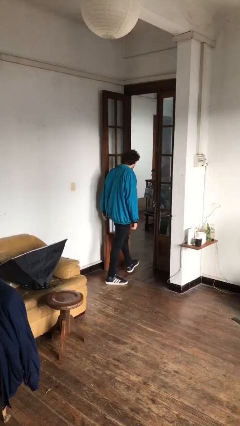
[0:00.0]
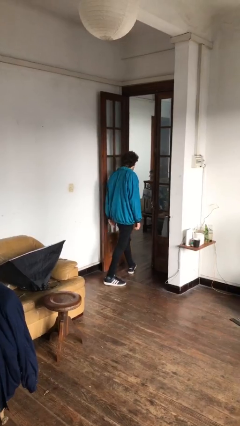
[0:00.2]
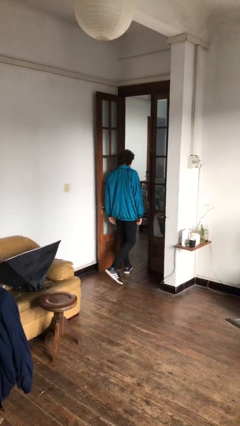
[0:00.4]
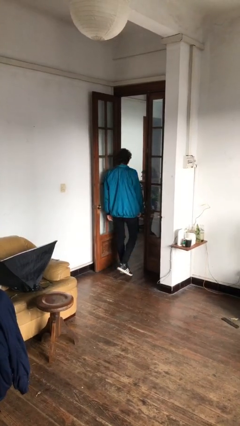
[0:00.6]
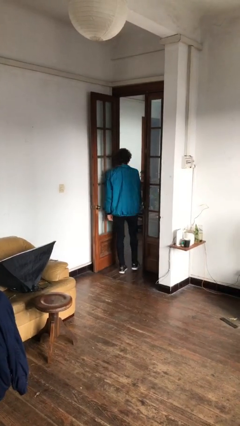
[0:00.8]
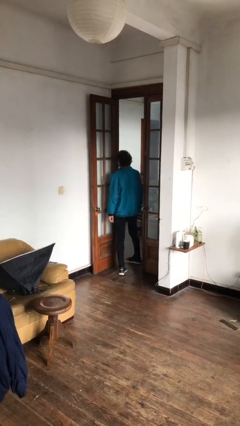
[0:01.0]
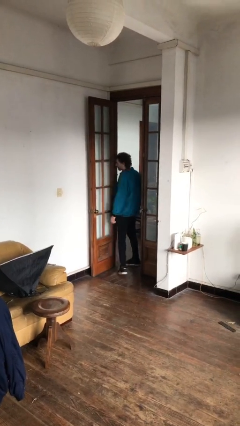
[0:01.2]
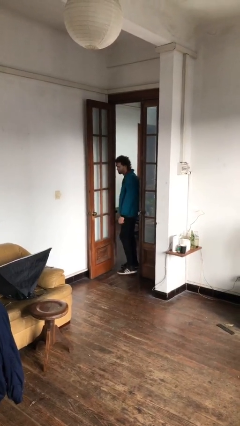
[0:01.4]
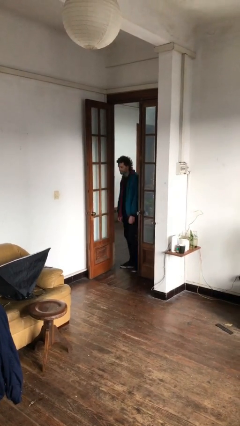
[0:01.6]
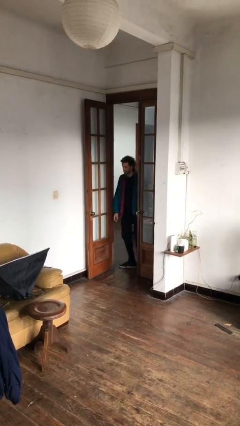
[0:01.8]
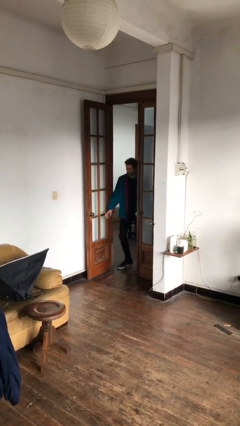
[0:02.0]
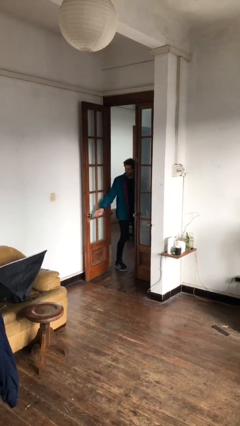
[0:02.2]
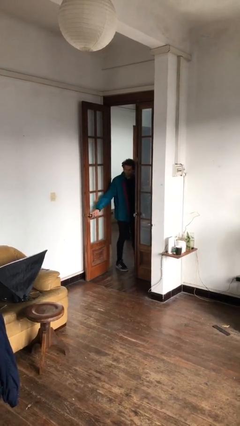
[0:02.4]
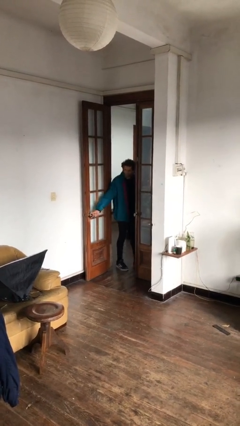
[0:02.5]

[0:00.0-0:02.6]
person exits scene through structure

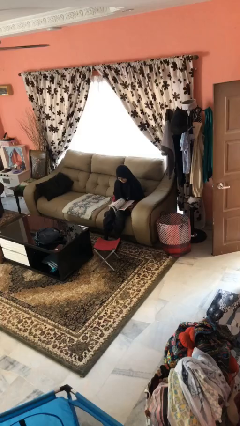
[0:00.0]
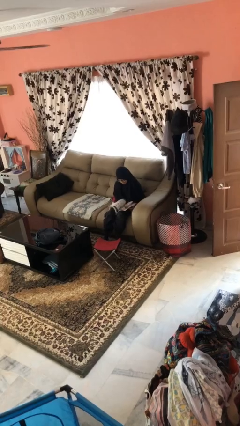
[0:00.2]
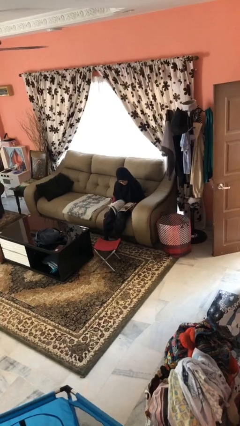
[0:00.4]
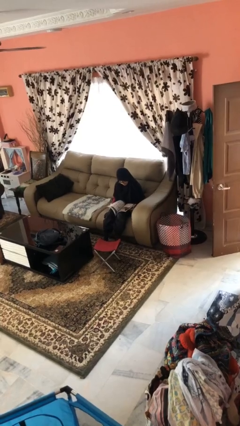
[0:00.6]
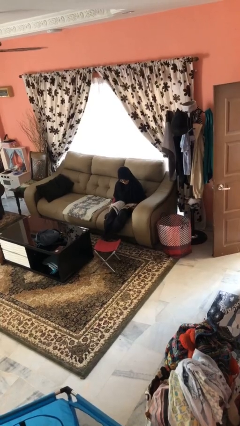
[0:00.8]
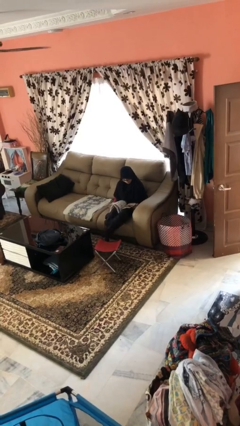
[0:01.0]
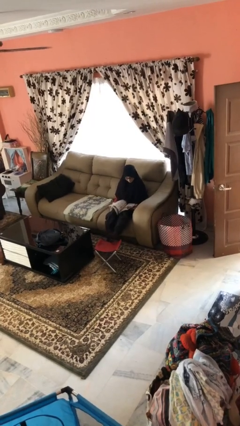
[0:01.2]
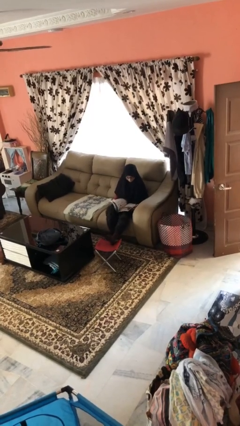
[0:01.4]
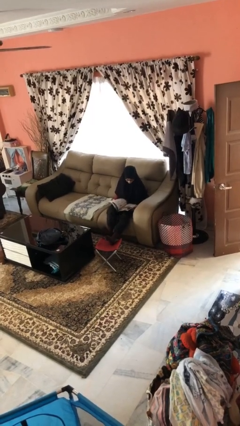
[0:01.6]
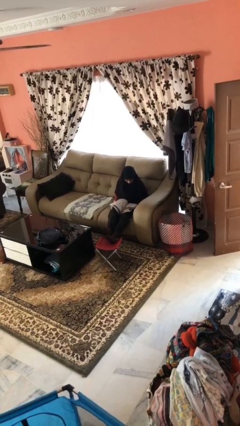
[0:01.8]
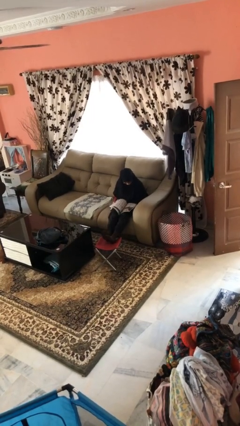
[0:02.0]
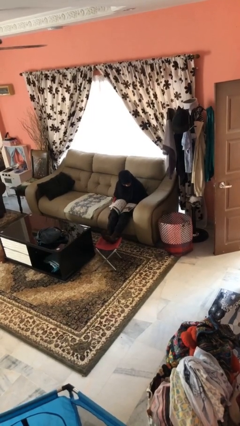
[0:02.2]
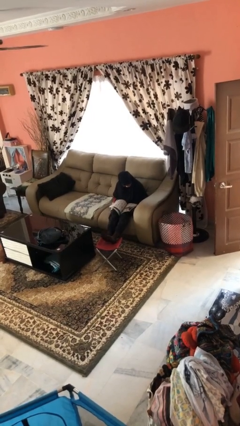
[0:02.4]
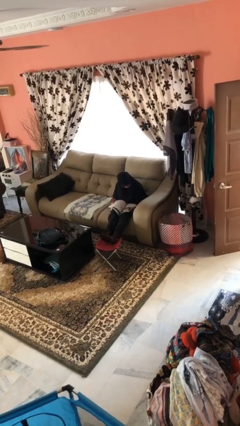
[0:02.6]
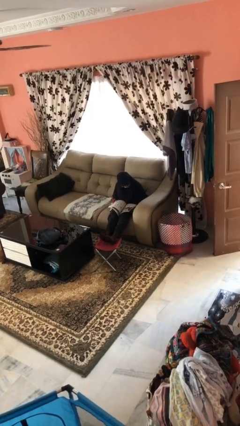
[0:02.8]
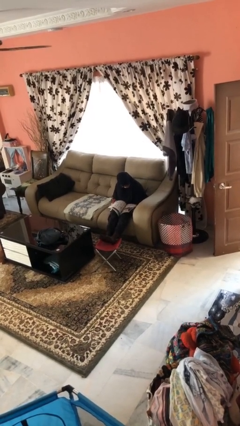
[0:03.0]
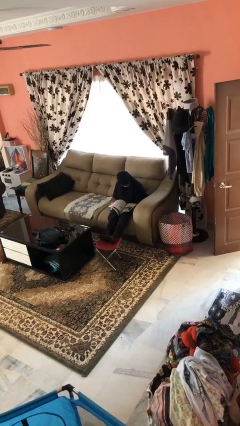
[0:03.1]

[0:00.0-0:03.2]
person puts feet up

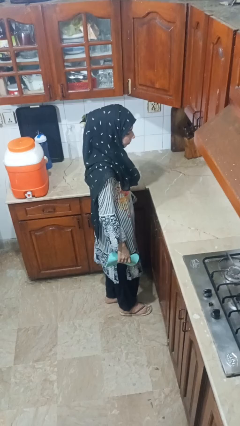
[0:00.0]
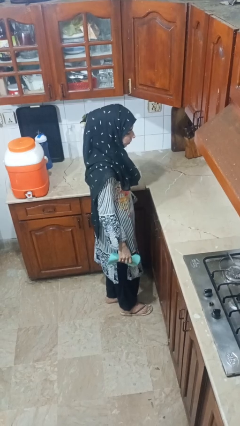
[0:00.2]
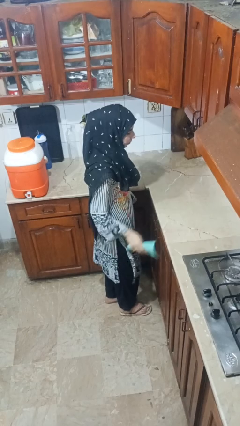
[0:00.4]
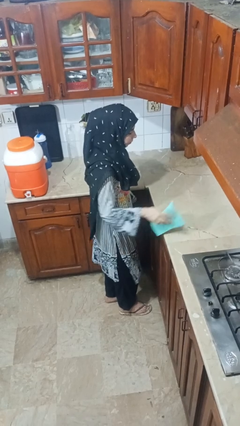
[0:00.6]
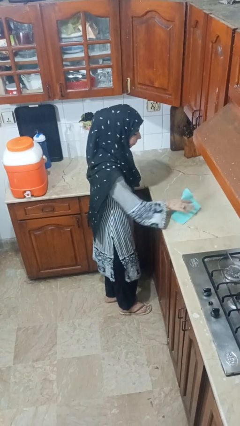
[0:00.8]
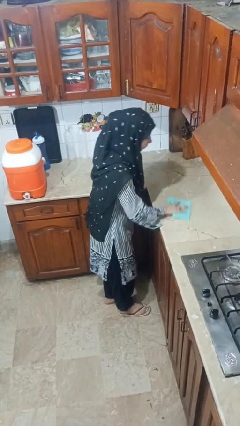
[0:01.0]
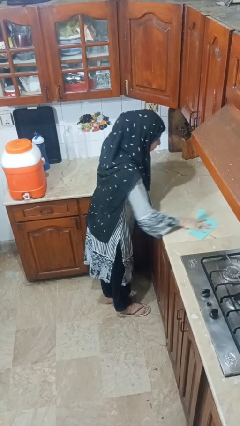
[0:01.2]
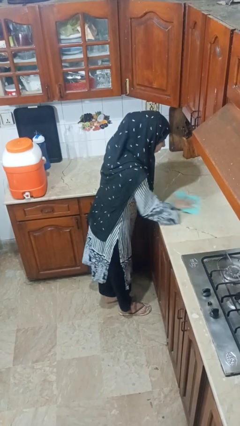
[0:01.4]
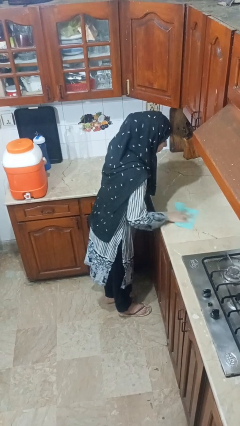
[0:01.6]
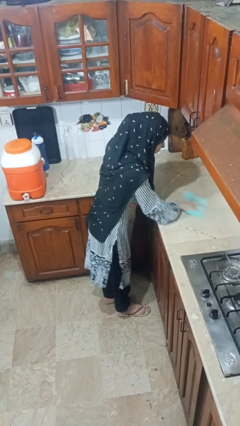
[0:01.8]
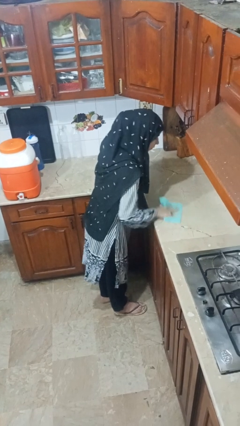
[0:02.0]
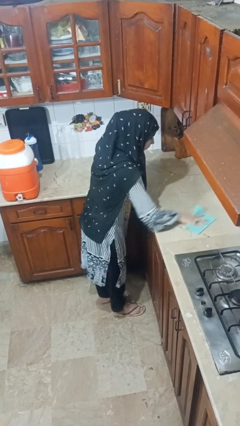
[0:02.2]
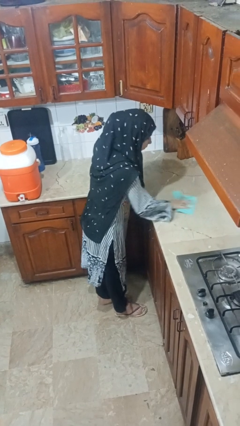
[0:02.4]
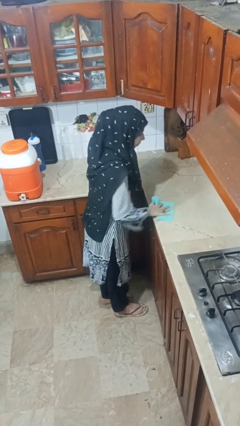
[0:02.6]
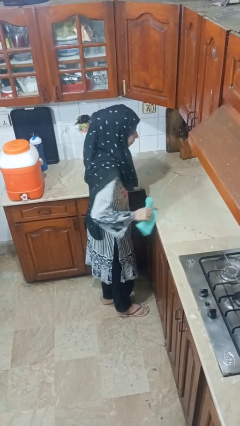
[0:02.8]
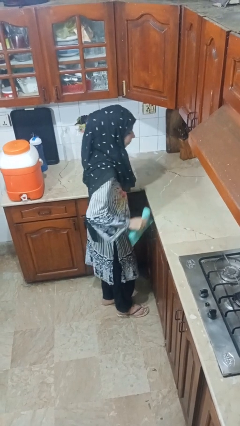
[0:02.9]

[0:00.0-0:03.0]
person cleans table with rag

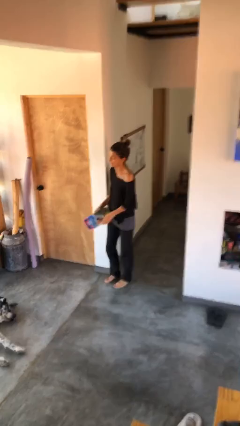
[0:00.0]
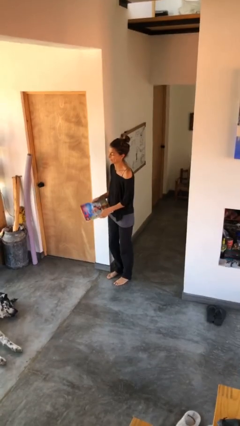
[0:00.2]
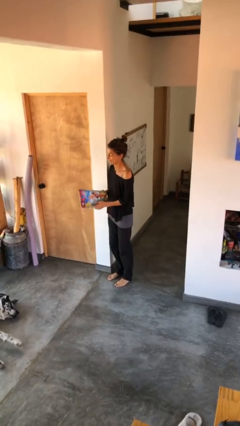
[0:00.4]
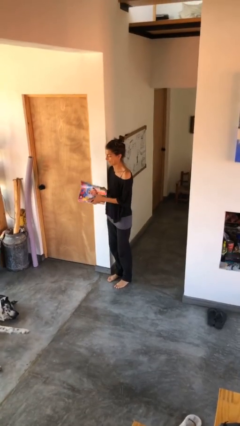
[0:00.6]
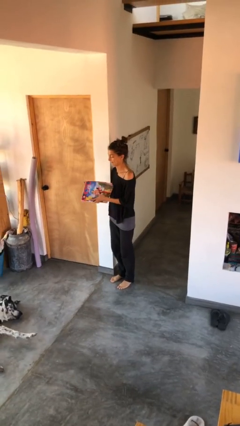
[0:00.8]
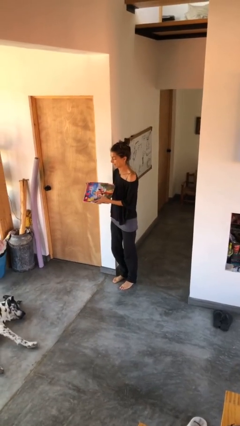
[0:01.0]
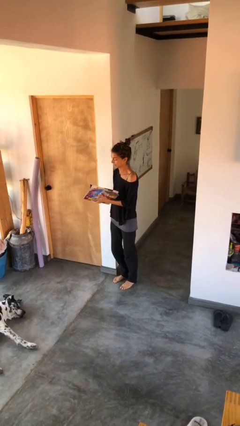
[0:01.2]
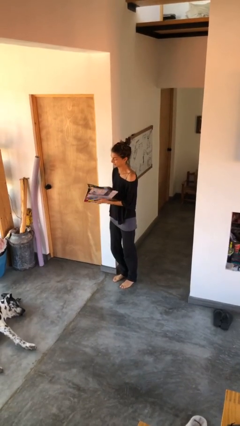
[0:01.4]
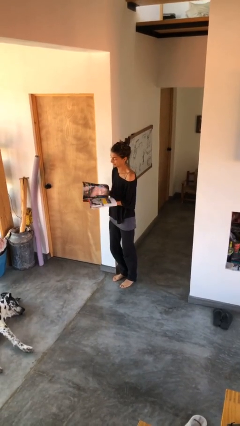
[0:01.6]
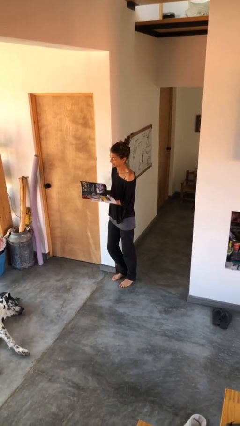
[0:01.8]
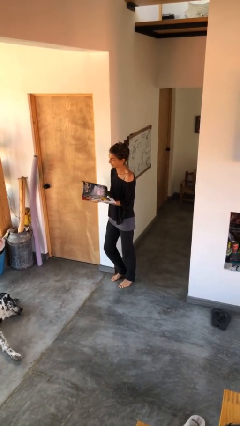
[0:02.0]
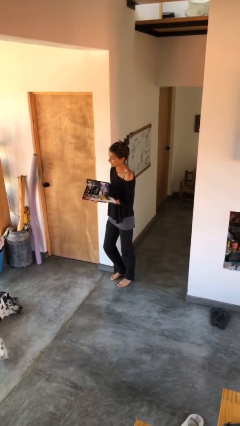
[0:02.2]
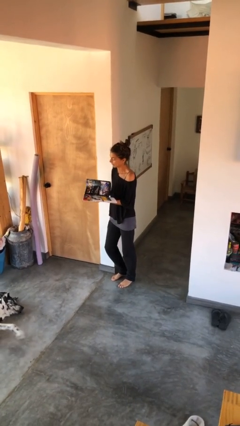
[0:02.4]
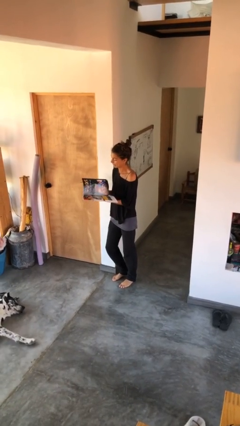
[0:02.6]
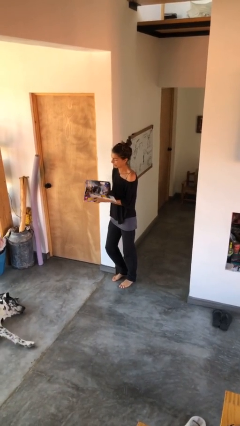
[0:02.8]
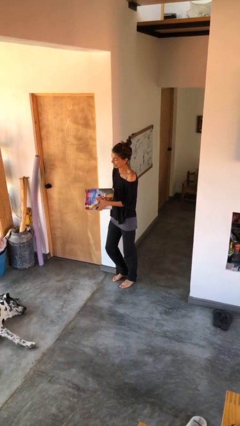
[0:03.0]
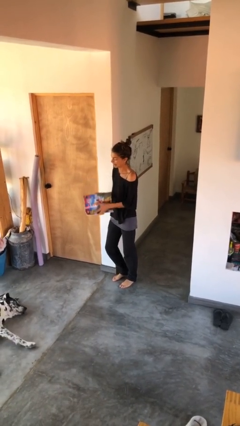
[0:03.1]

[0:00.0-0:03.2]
person reads magazine

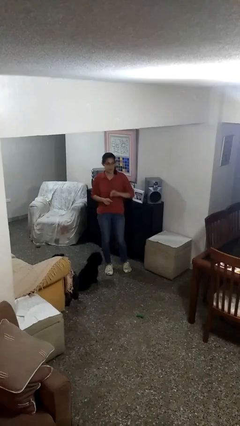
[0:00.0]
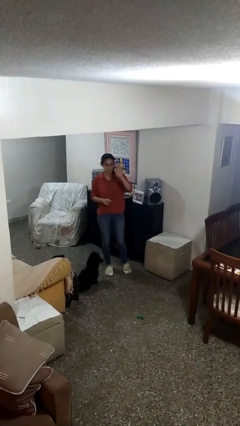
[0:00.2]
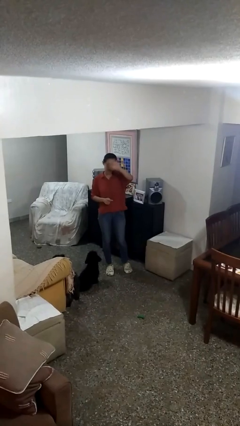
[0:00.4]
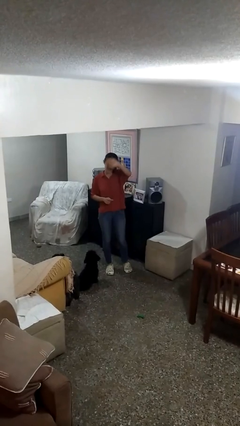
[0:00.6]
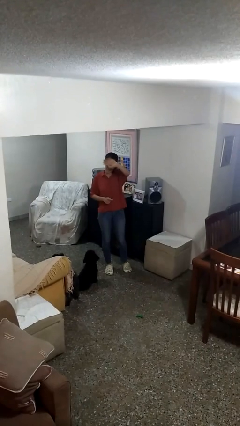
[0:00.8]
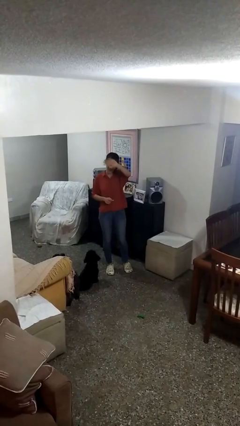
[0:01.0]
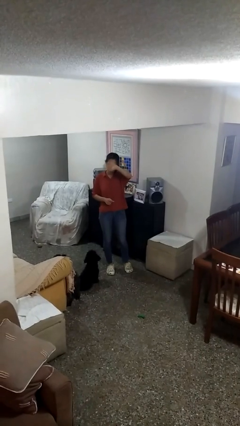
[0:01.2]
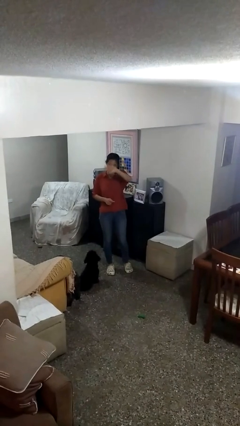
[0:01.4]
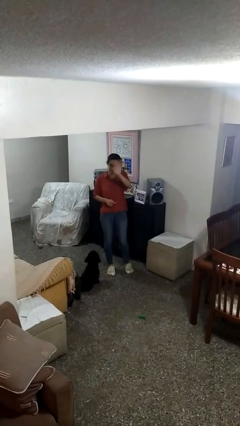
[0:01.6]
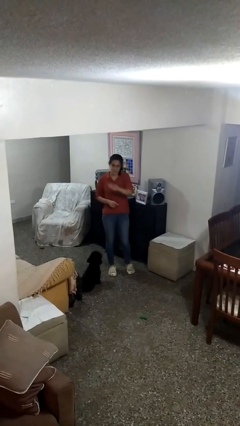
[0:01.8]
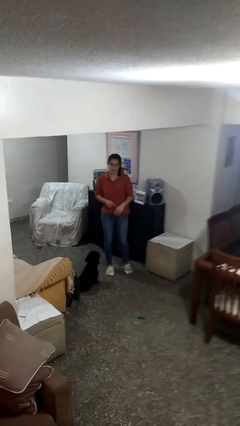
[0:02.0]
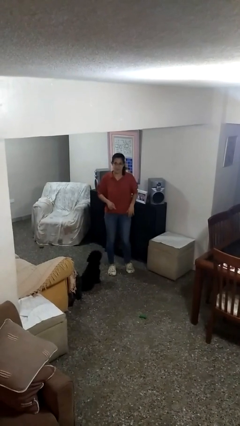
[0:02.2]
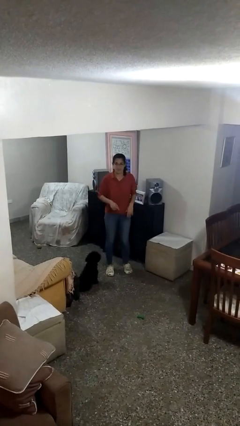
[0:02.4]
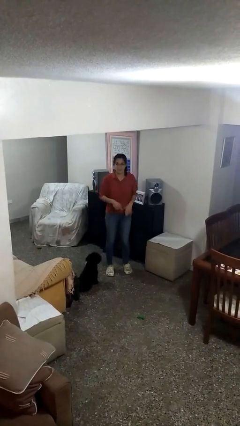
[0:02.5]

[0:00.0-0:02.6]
person waves at person

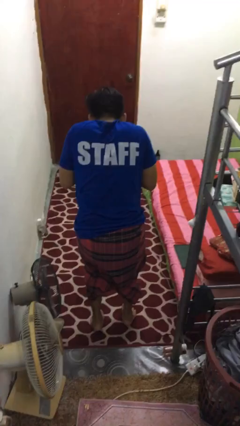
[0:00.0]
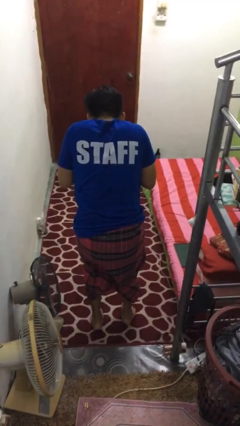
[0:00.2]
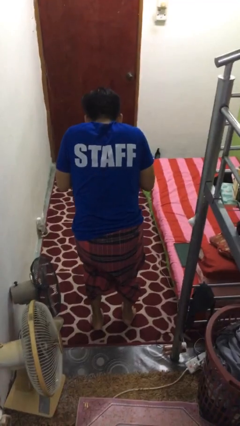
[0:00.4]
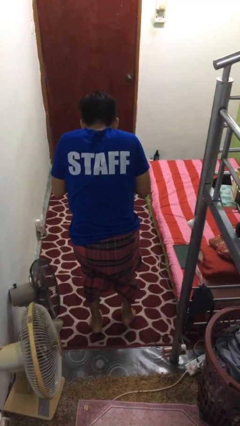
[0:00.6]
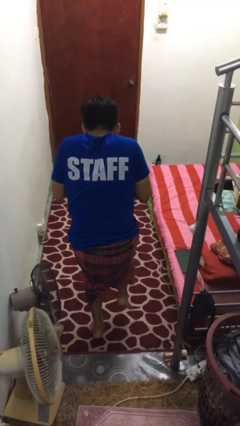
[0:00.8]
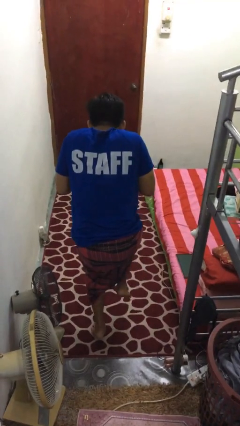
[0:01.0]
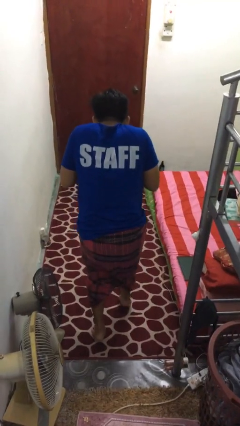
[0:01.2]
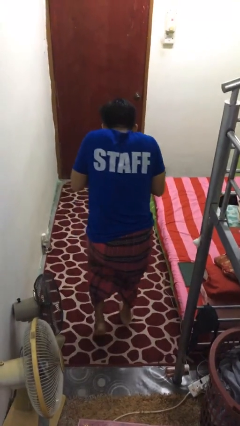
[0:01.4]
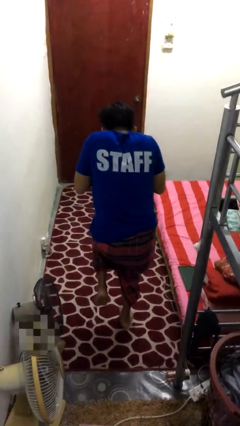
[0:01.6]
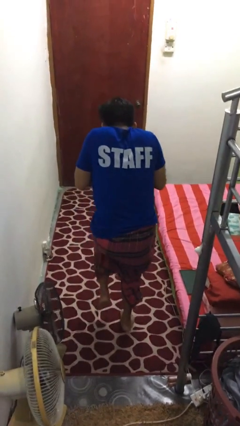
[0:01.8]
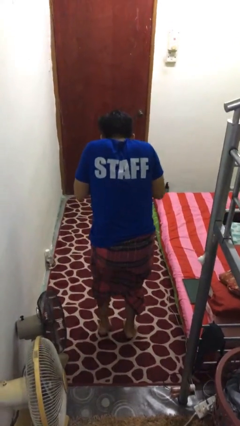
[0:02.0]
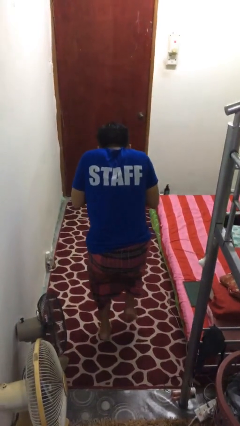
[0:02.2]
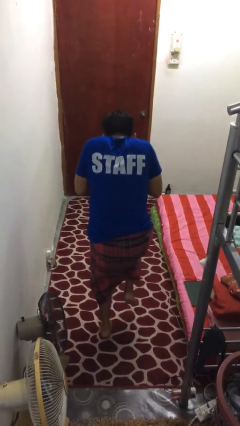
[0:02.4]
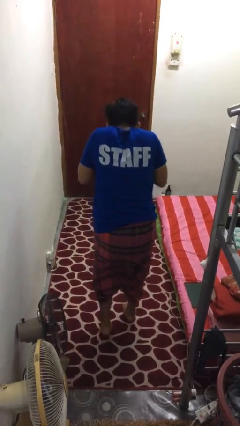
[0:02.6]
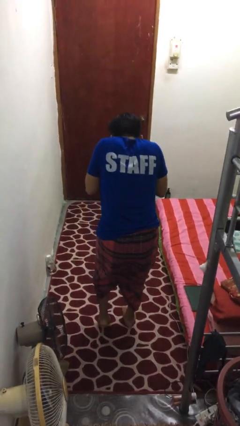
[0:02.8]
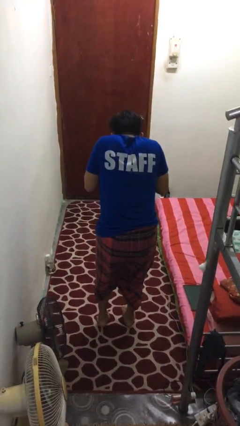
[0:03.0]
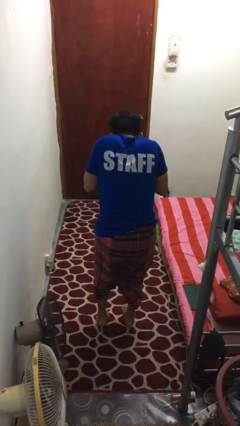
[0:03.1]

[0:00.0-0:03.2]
person walks tiptoe
